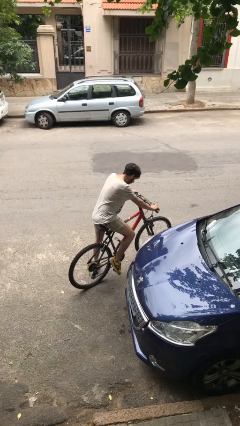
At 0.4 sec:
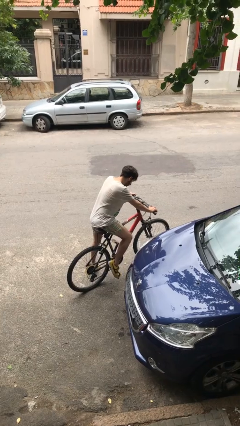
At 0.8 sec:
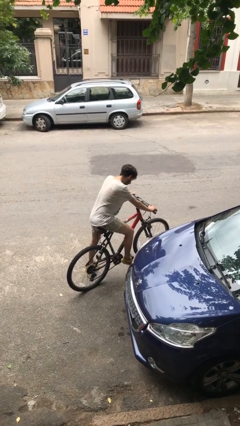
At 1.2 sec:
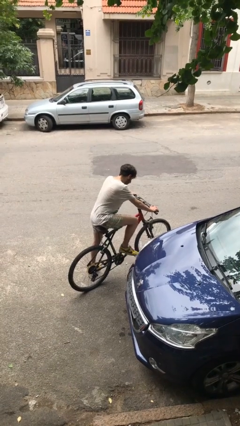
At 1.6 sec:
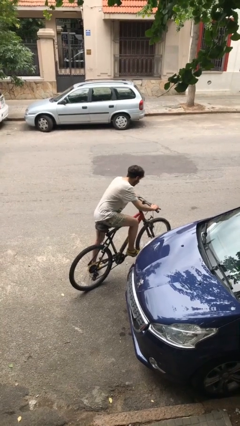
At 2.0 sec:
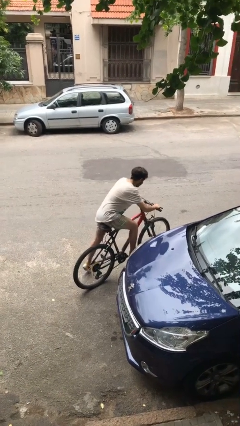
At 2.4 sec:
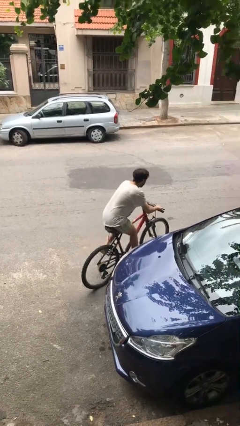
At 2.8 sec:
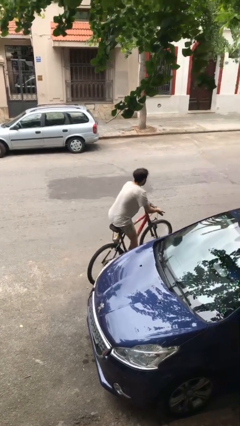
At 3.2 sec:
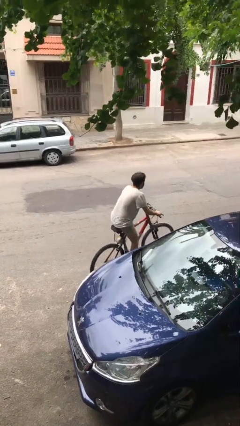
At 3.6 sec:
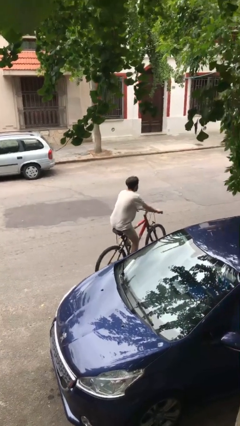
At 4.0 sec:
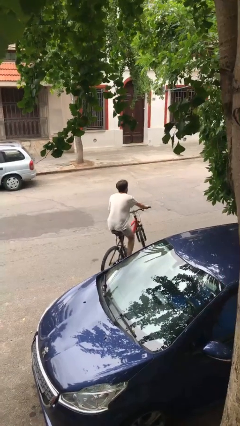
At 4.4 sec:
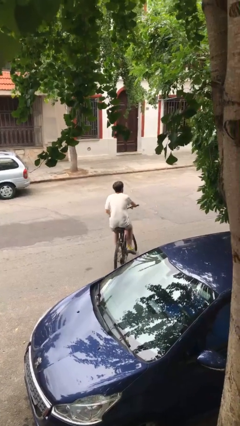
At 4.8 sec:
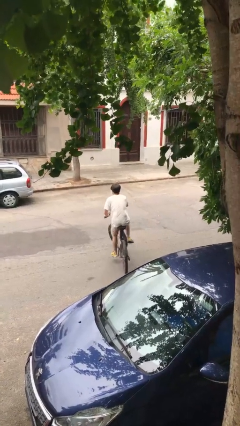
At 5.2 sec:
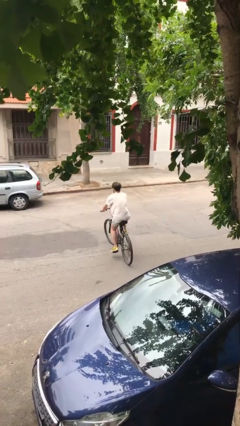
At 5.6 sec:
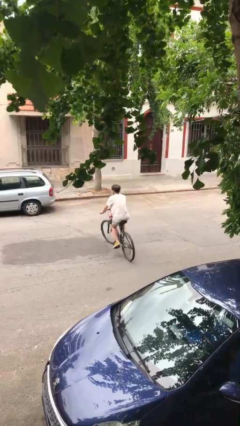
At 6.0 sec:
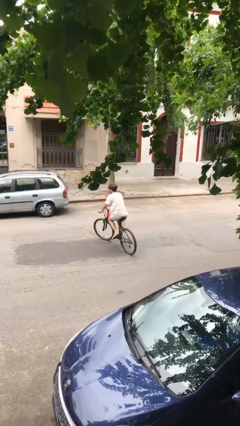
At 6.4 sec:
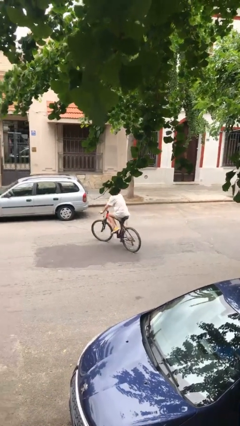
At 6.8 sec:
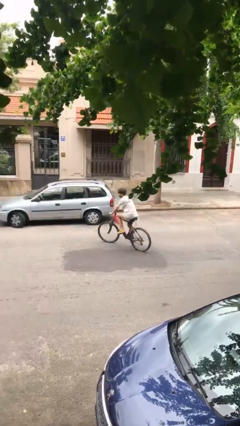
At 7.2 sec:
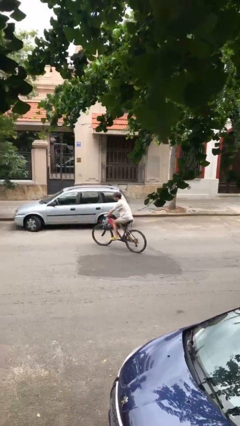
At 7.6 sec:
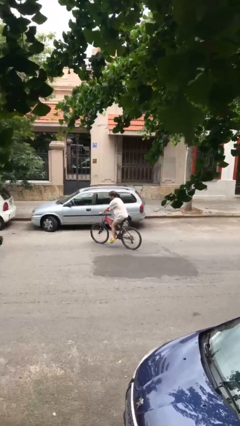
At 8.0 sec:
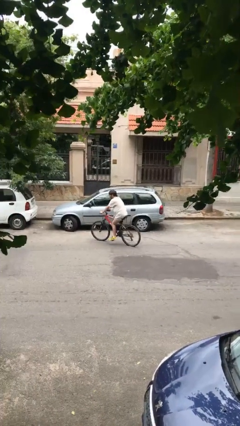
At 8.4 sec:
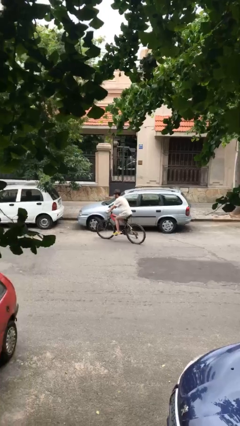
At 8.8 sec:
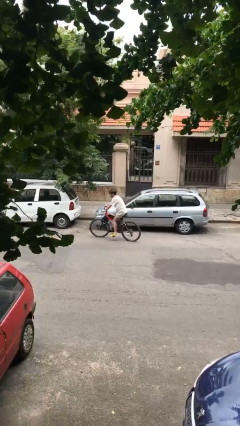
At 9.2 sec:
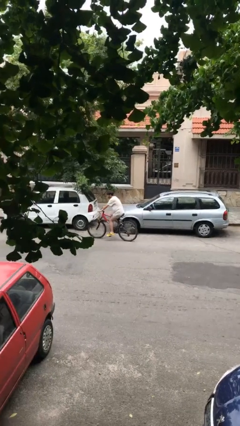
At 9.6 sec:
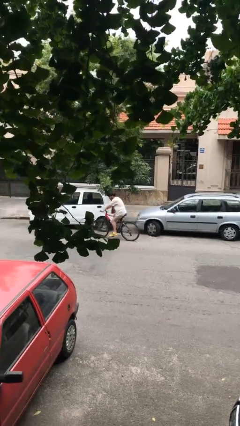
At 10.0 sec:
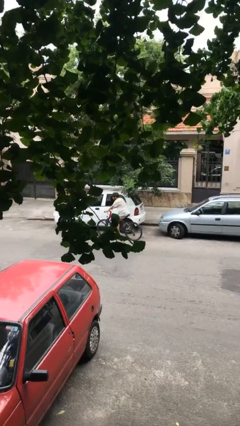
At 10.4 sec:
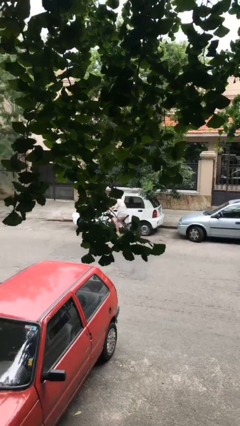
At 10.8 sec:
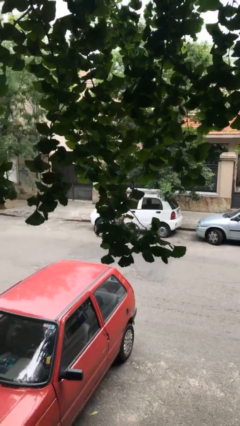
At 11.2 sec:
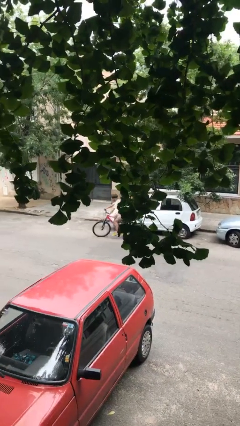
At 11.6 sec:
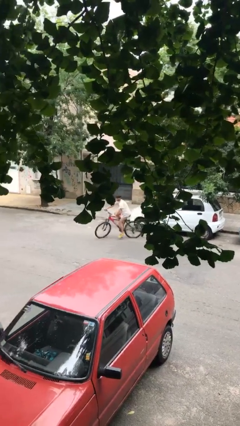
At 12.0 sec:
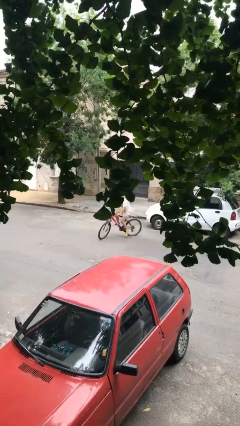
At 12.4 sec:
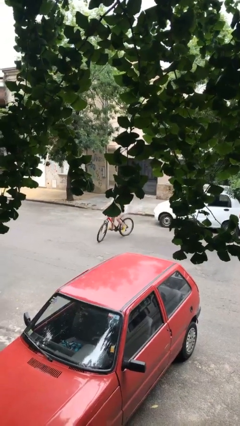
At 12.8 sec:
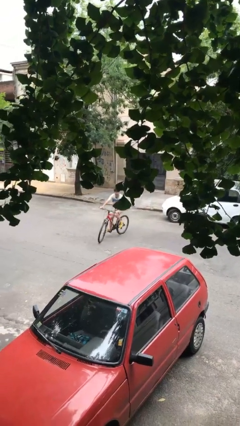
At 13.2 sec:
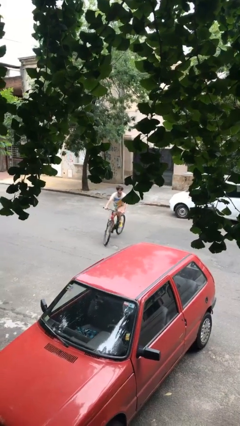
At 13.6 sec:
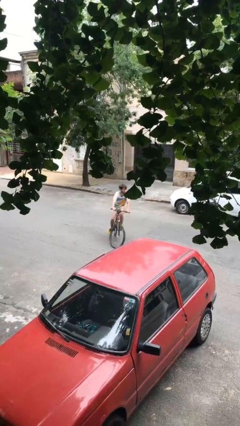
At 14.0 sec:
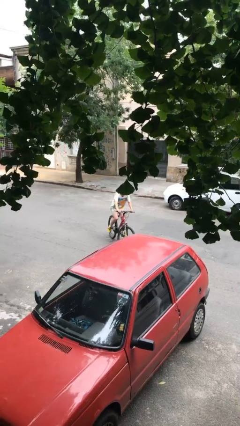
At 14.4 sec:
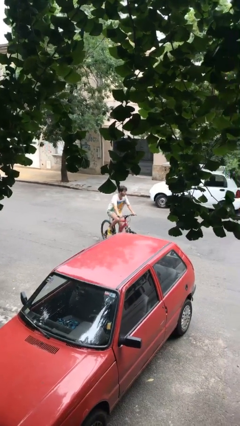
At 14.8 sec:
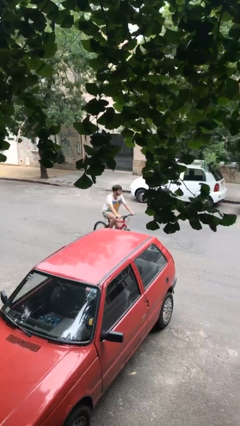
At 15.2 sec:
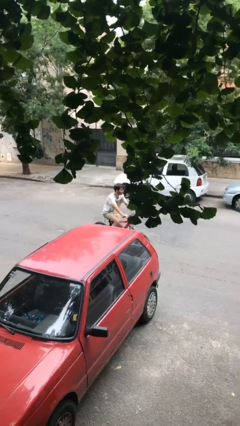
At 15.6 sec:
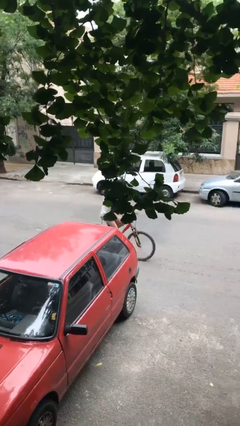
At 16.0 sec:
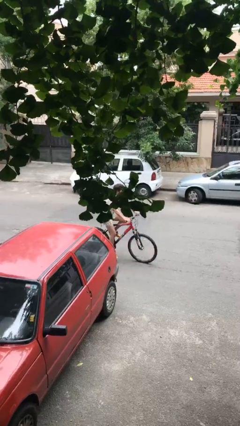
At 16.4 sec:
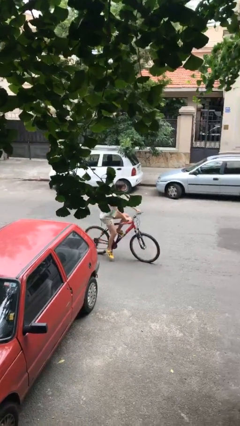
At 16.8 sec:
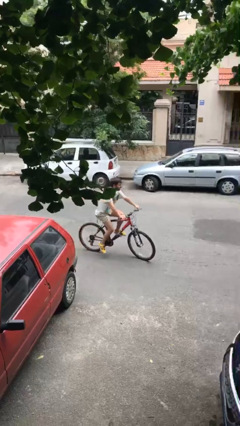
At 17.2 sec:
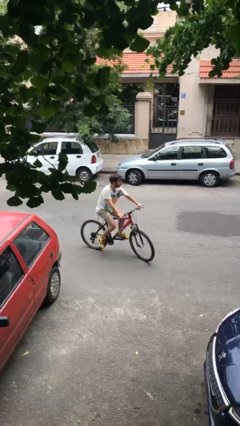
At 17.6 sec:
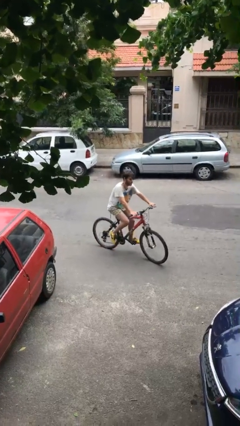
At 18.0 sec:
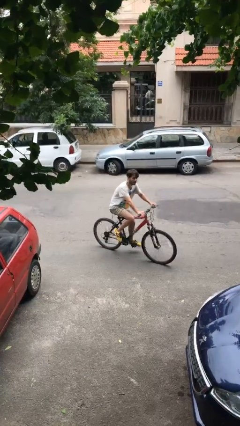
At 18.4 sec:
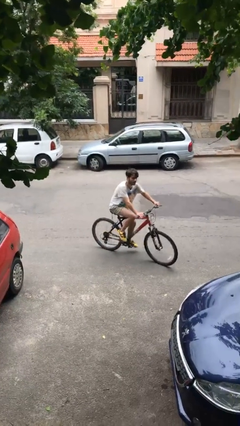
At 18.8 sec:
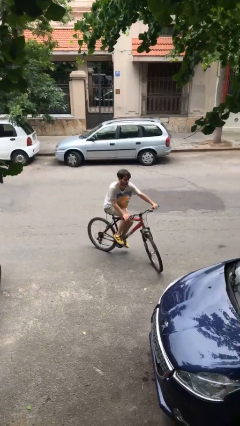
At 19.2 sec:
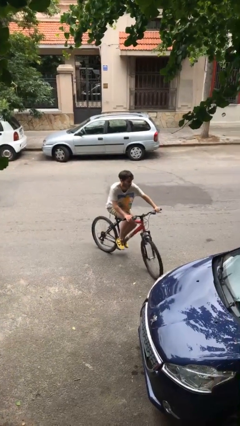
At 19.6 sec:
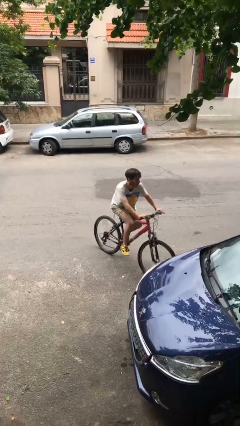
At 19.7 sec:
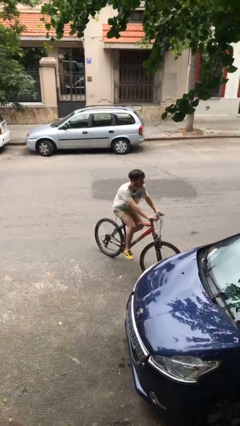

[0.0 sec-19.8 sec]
person rides bicycle

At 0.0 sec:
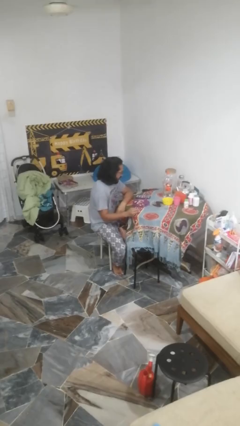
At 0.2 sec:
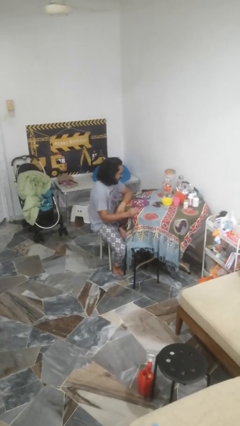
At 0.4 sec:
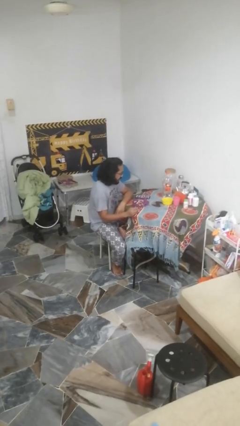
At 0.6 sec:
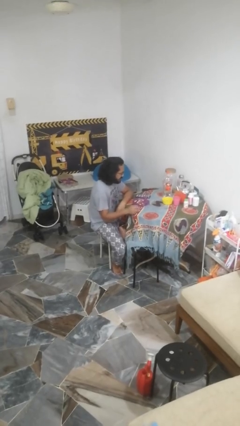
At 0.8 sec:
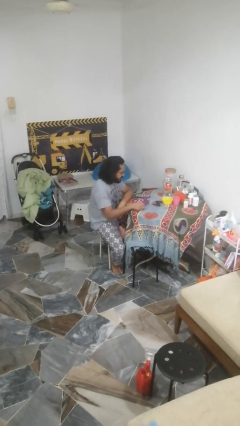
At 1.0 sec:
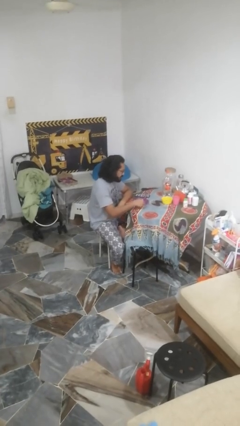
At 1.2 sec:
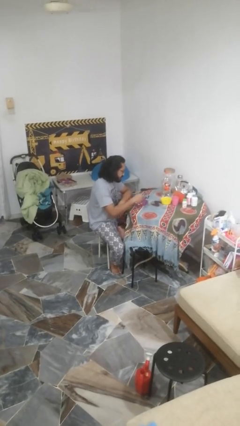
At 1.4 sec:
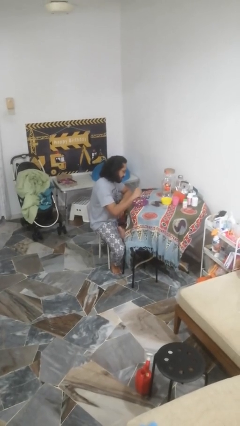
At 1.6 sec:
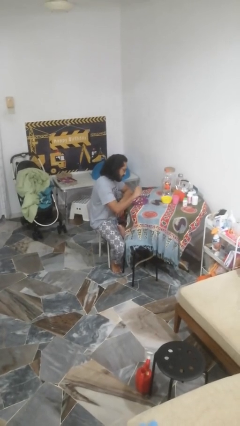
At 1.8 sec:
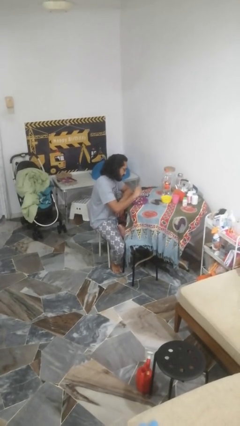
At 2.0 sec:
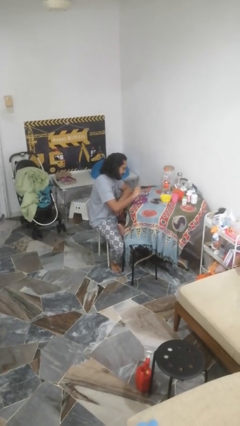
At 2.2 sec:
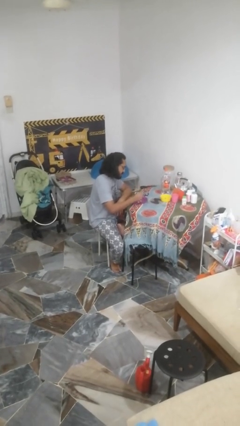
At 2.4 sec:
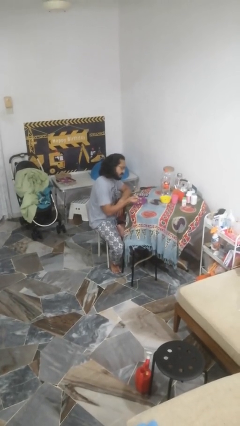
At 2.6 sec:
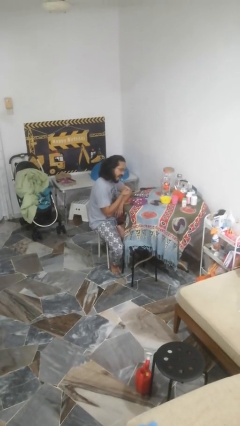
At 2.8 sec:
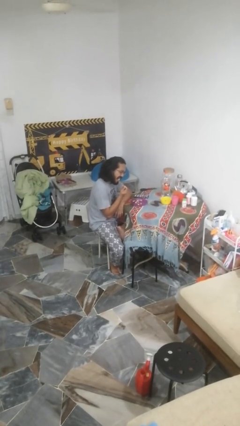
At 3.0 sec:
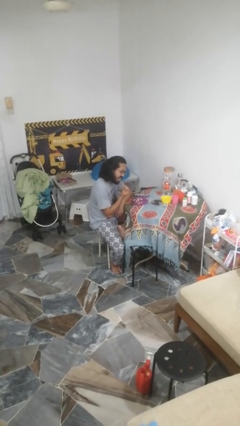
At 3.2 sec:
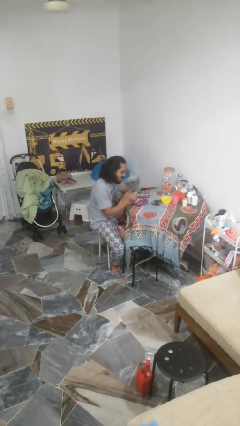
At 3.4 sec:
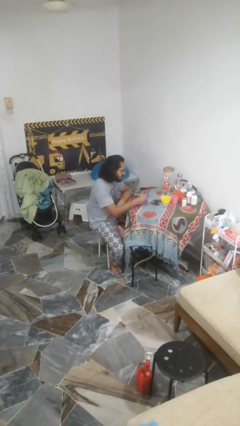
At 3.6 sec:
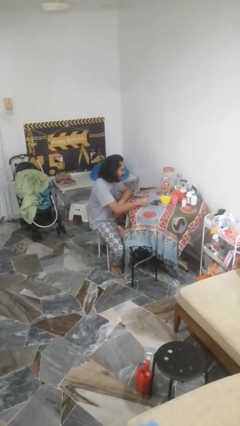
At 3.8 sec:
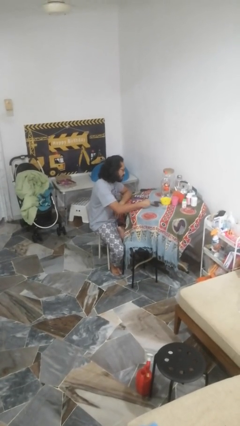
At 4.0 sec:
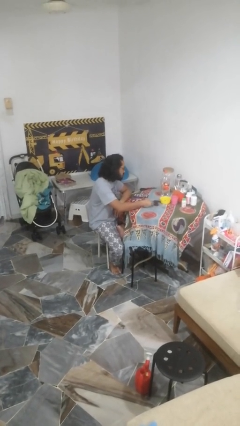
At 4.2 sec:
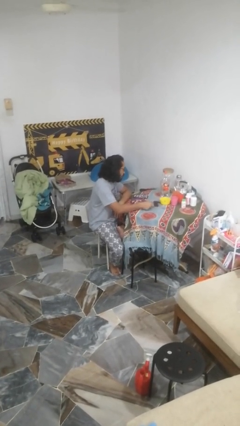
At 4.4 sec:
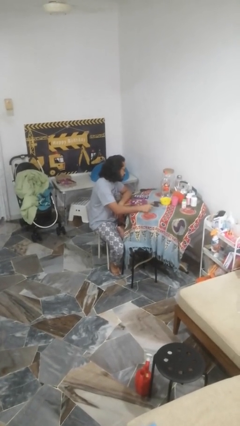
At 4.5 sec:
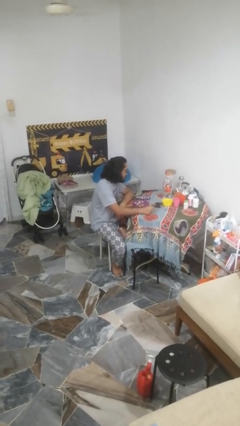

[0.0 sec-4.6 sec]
person eats with utensil

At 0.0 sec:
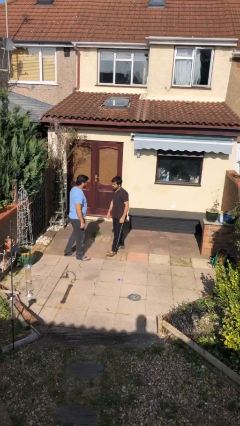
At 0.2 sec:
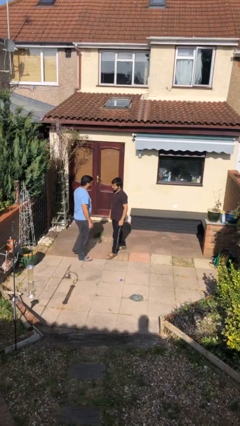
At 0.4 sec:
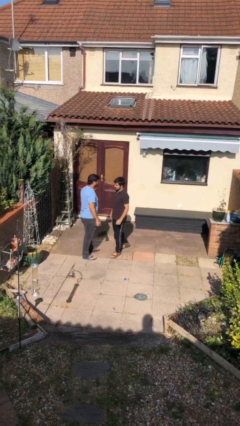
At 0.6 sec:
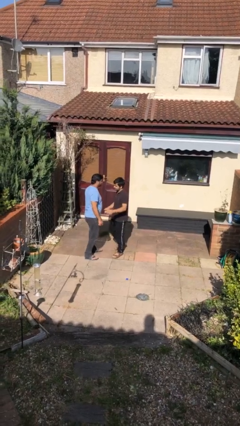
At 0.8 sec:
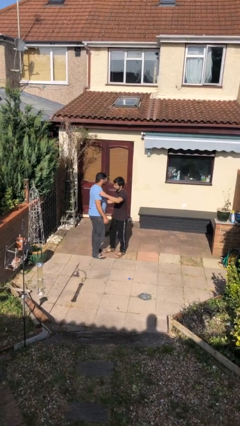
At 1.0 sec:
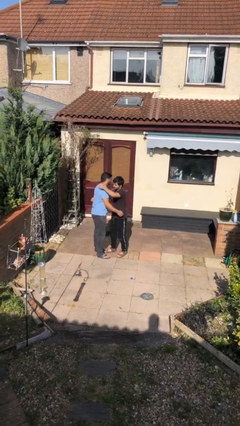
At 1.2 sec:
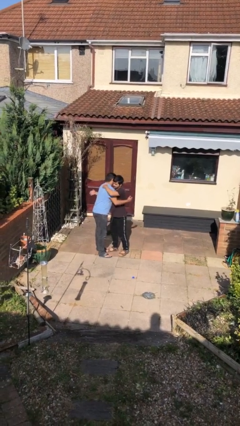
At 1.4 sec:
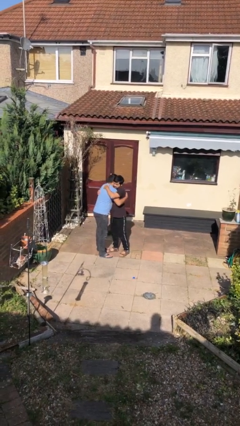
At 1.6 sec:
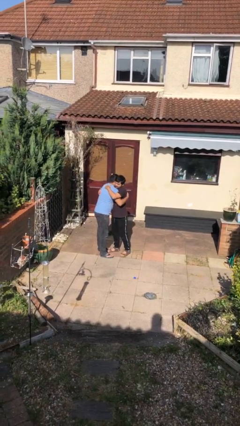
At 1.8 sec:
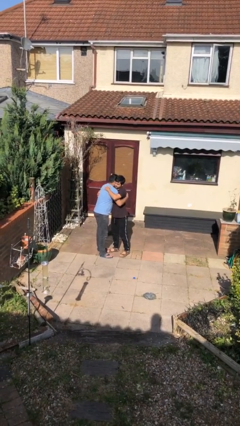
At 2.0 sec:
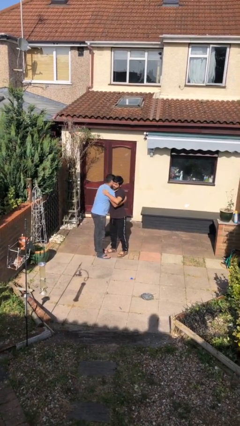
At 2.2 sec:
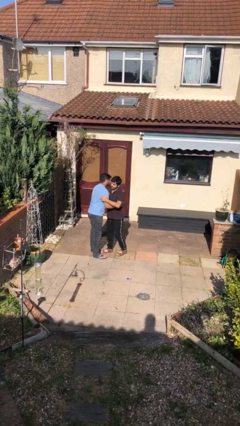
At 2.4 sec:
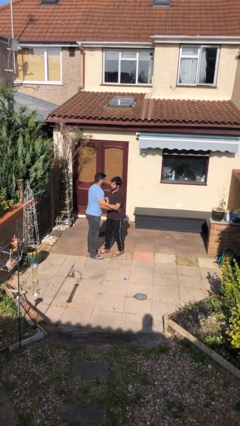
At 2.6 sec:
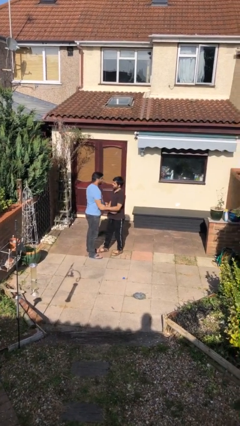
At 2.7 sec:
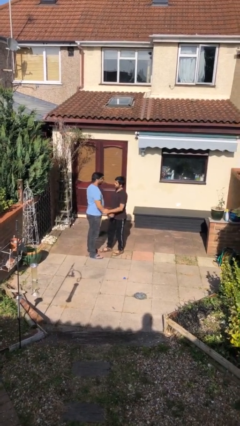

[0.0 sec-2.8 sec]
person embraces person

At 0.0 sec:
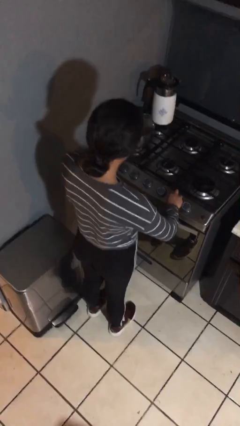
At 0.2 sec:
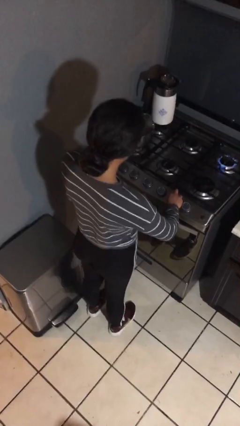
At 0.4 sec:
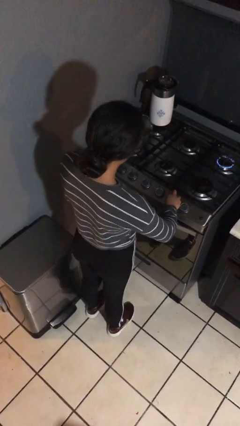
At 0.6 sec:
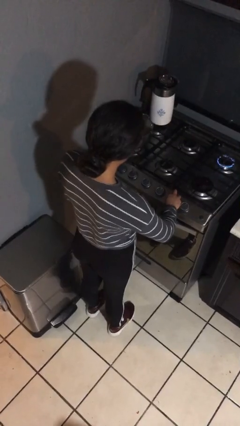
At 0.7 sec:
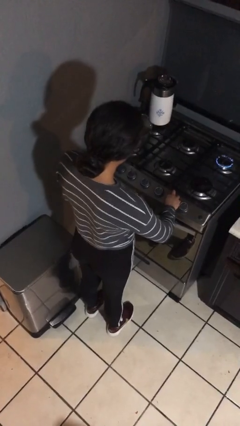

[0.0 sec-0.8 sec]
person turns on stovetop
